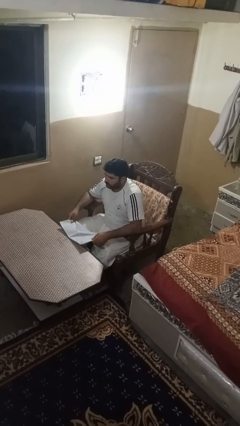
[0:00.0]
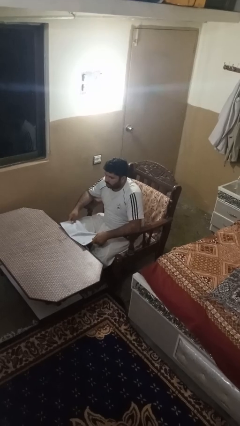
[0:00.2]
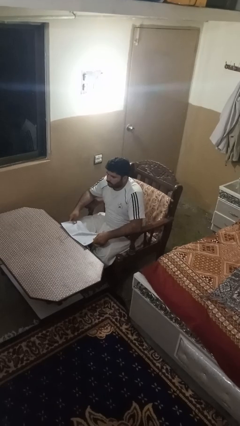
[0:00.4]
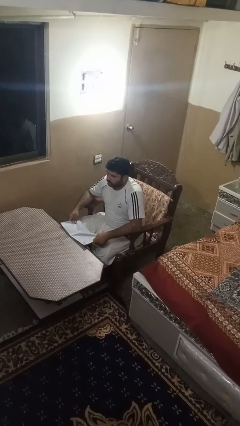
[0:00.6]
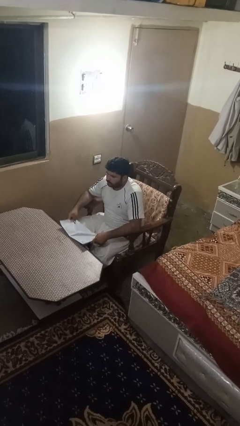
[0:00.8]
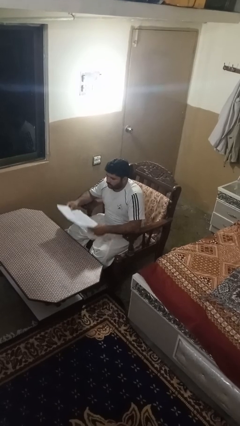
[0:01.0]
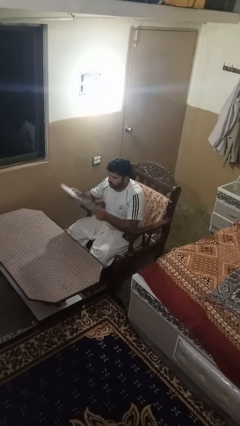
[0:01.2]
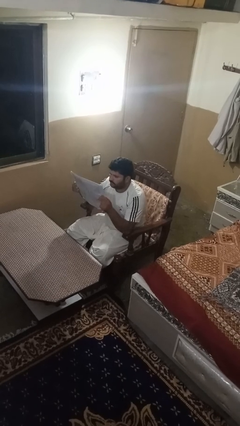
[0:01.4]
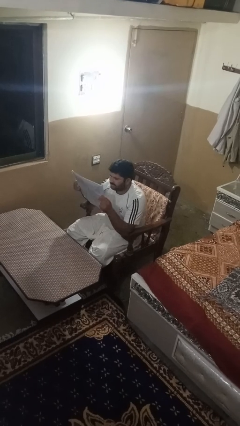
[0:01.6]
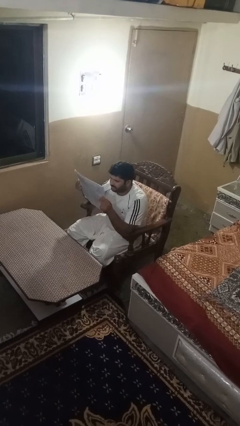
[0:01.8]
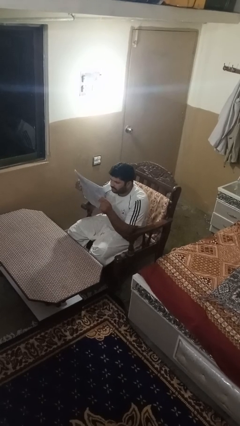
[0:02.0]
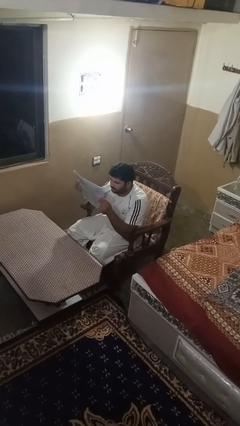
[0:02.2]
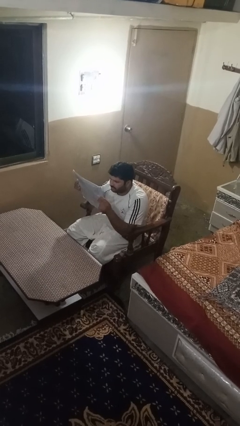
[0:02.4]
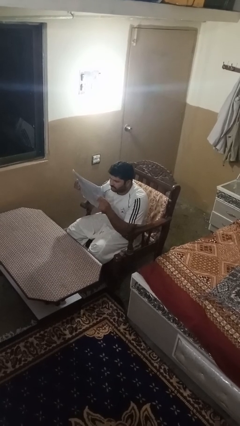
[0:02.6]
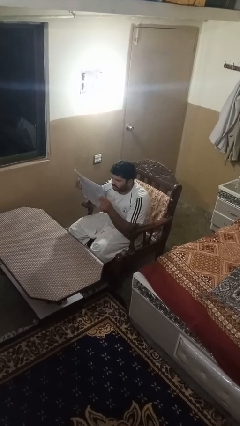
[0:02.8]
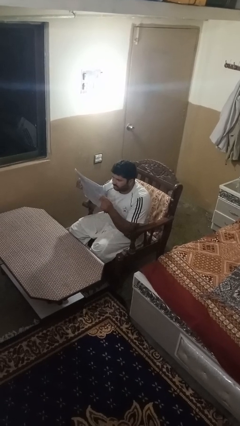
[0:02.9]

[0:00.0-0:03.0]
person reads newspaper

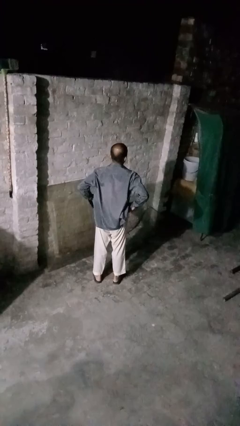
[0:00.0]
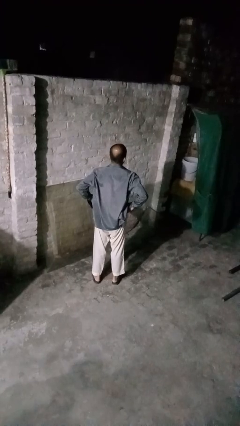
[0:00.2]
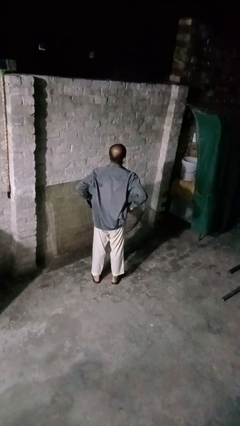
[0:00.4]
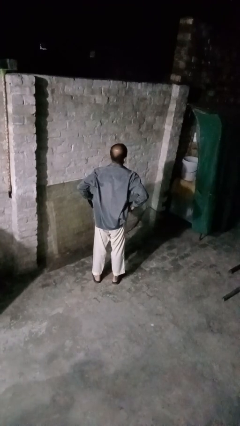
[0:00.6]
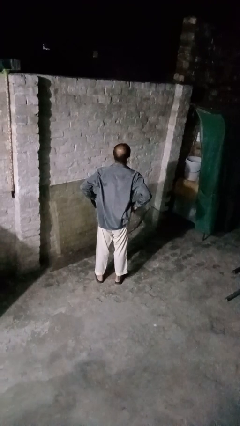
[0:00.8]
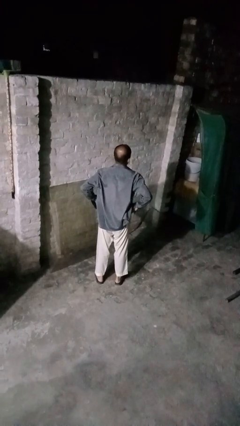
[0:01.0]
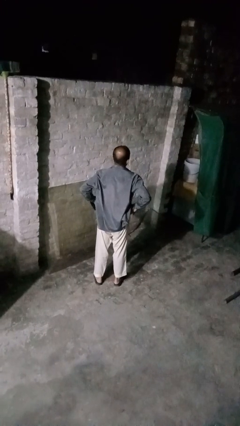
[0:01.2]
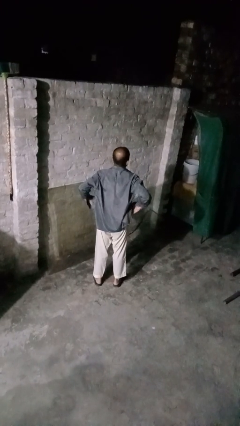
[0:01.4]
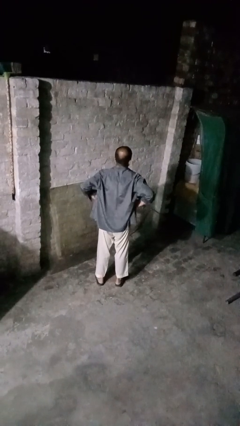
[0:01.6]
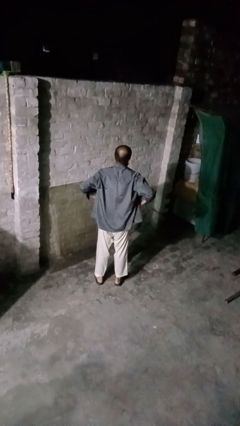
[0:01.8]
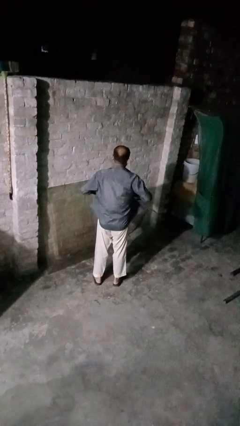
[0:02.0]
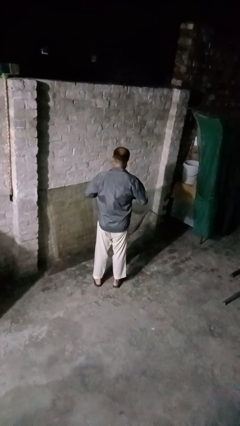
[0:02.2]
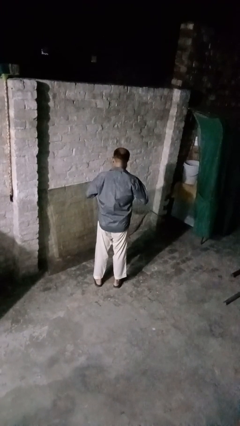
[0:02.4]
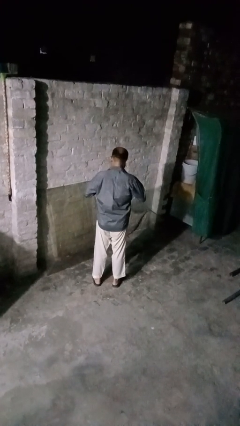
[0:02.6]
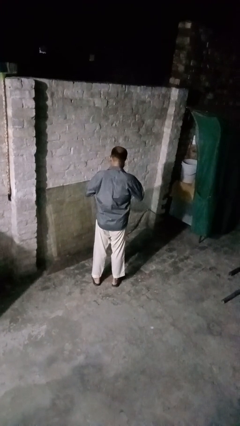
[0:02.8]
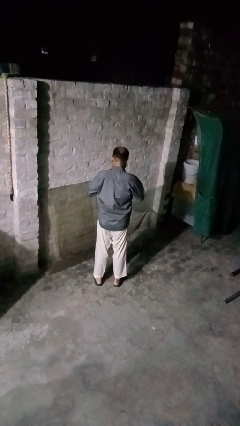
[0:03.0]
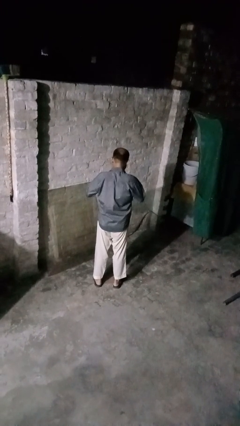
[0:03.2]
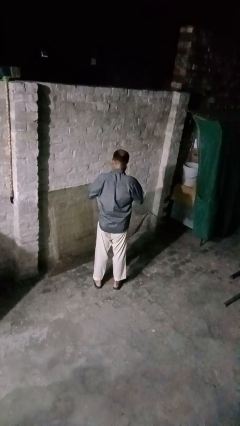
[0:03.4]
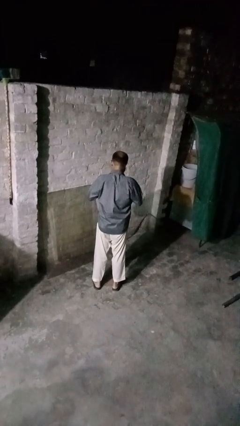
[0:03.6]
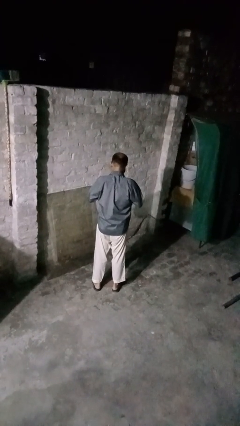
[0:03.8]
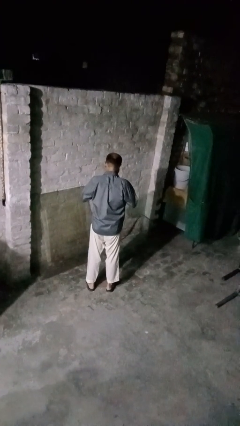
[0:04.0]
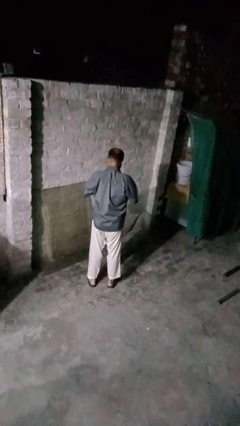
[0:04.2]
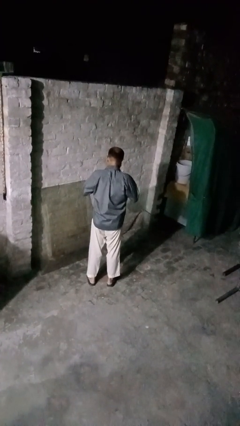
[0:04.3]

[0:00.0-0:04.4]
person buttons shirt

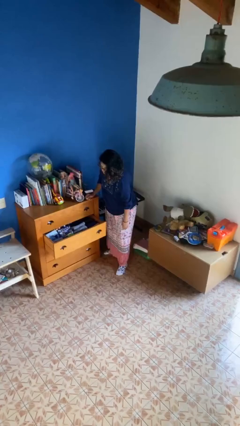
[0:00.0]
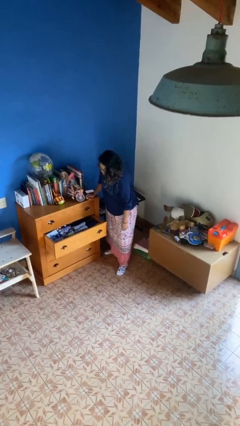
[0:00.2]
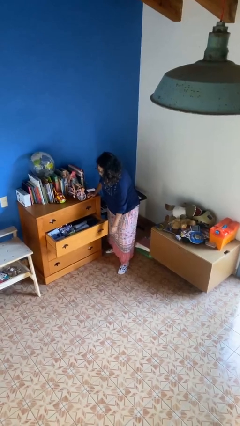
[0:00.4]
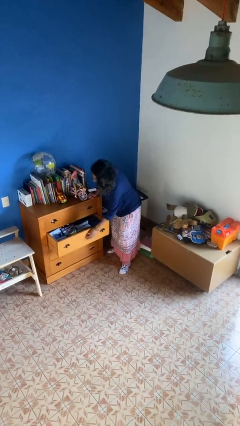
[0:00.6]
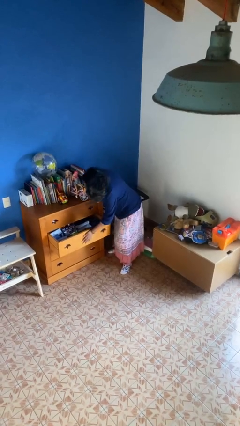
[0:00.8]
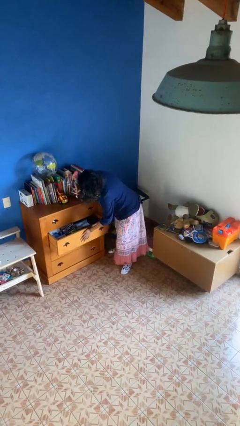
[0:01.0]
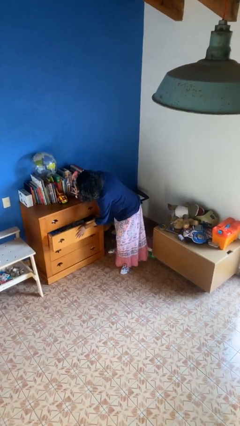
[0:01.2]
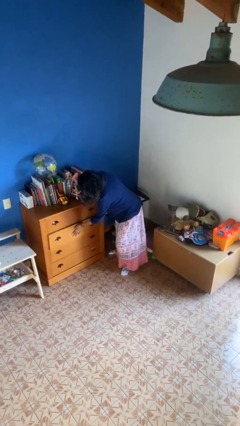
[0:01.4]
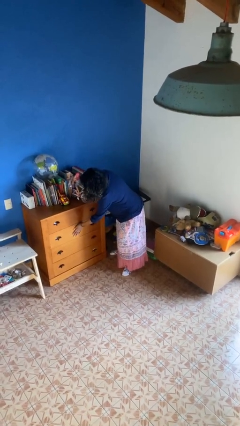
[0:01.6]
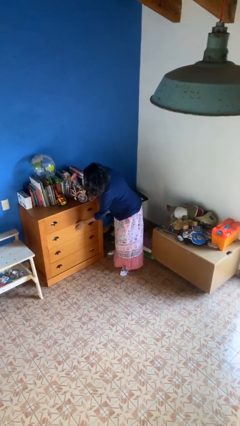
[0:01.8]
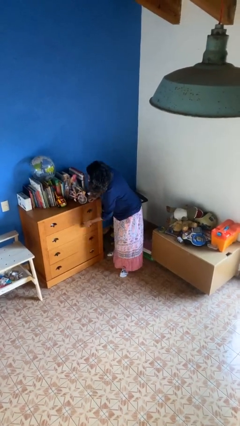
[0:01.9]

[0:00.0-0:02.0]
person closes dresser drawer

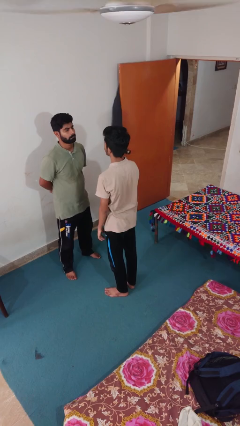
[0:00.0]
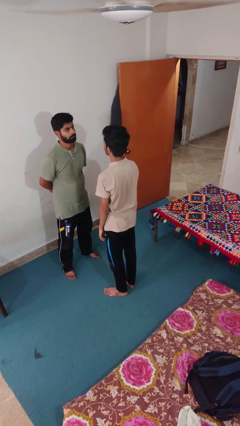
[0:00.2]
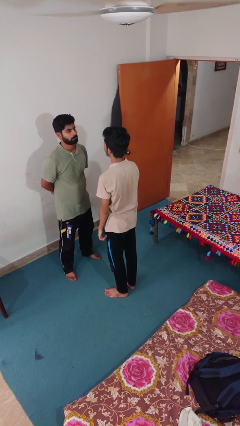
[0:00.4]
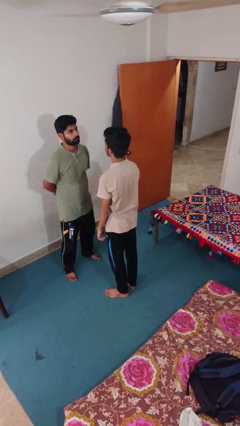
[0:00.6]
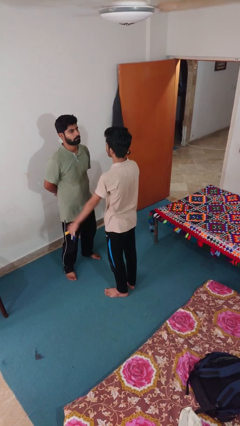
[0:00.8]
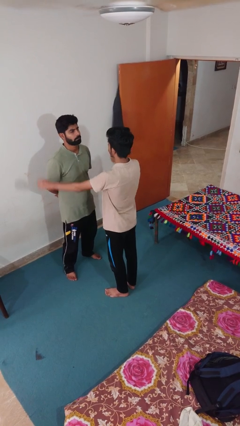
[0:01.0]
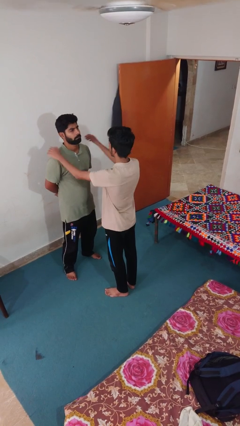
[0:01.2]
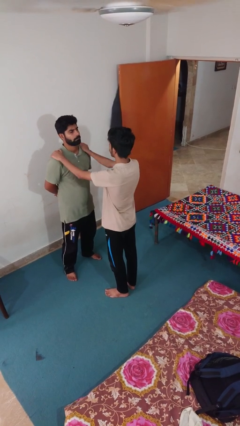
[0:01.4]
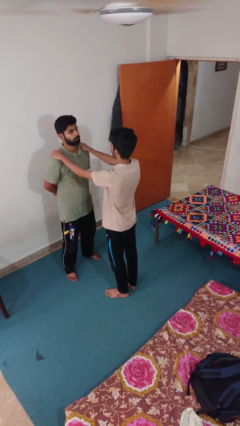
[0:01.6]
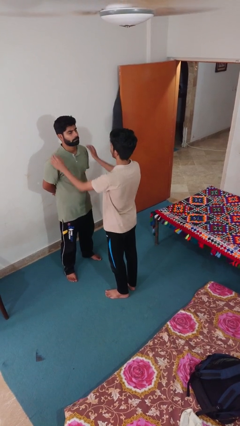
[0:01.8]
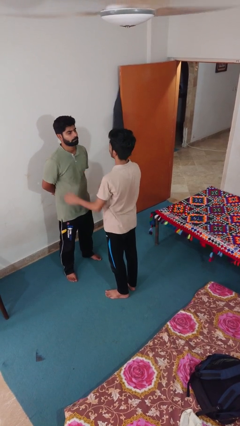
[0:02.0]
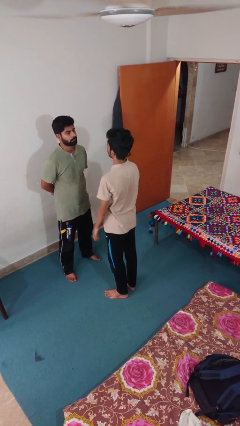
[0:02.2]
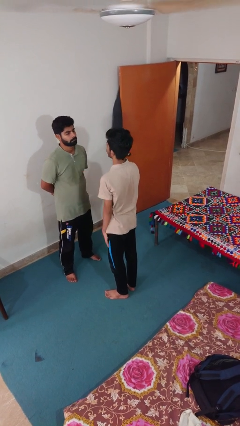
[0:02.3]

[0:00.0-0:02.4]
person pounds shoulders of person

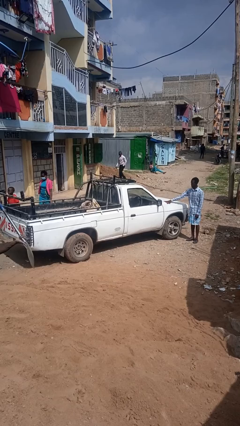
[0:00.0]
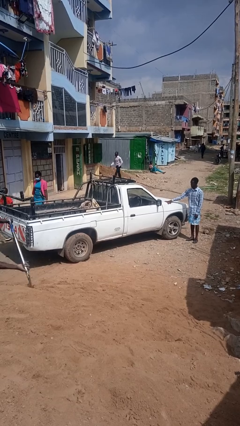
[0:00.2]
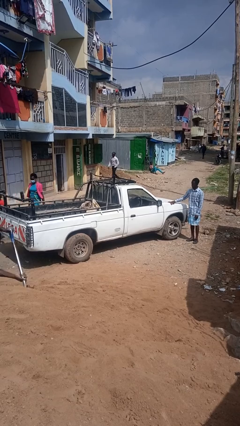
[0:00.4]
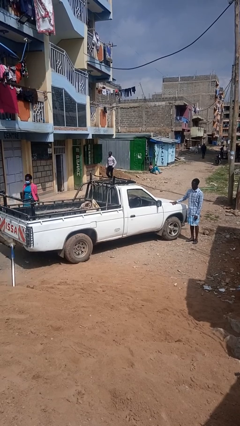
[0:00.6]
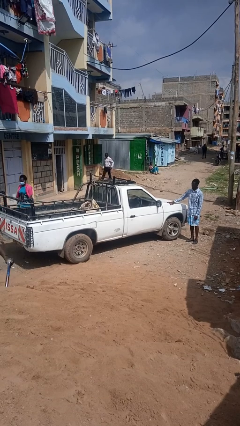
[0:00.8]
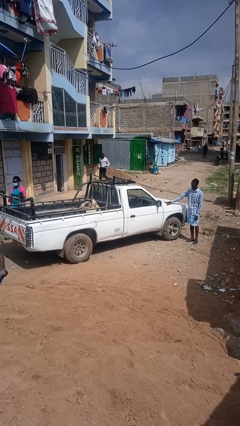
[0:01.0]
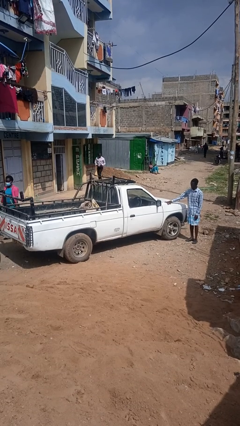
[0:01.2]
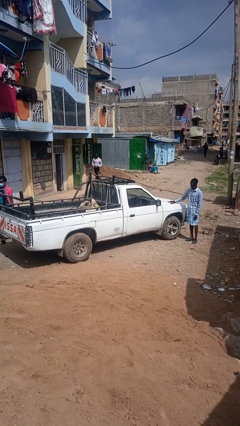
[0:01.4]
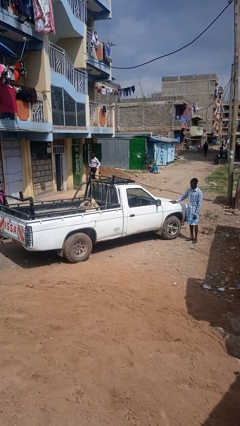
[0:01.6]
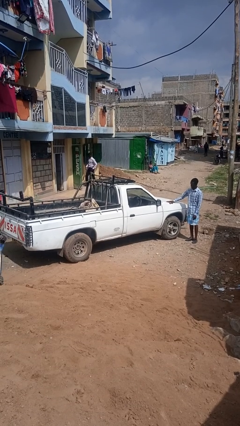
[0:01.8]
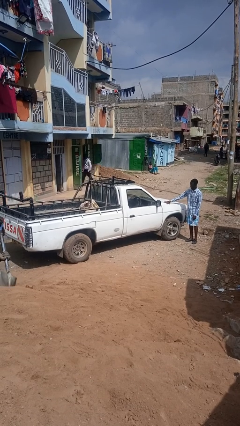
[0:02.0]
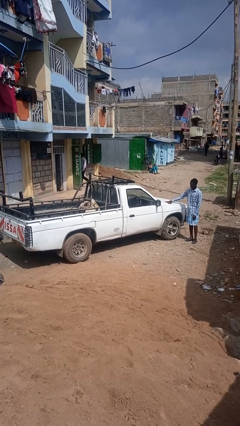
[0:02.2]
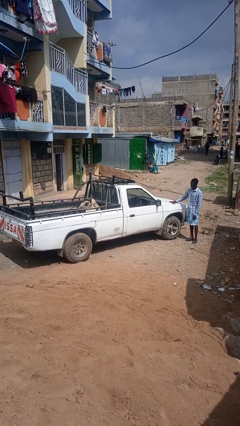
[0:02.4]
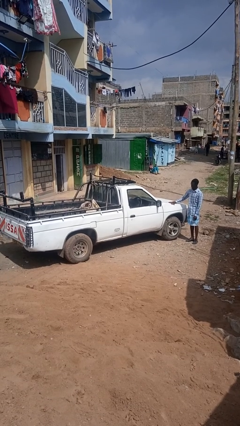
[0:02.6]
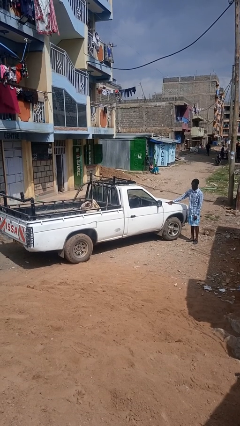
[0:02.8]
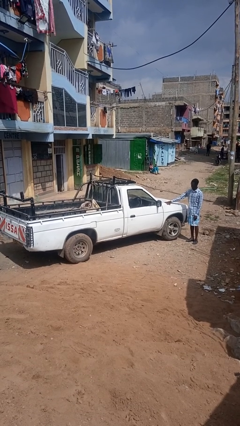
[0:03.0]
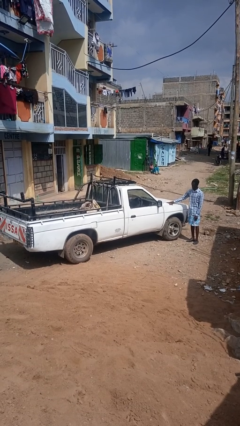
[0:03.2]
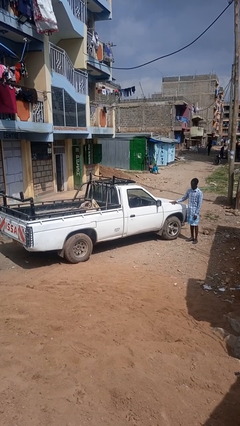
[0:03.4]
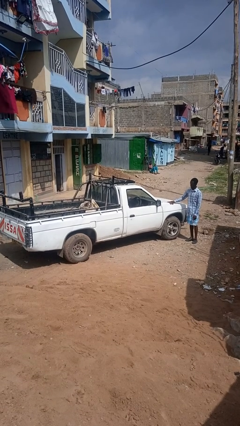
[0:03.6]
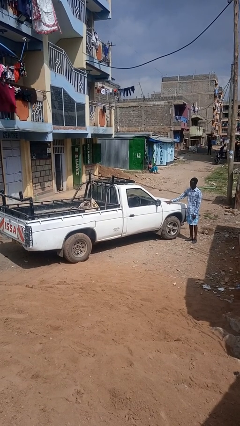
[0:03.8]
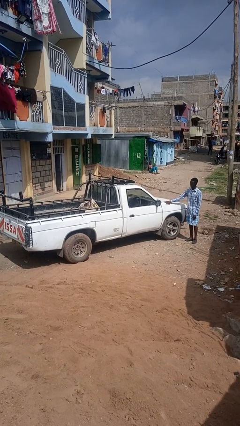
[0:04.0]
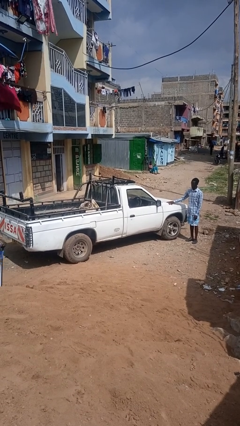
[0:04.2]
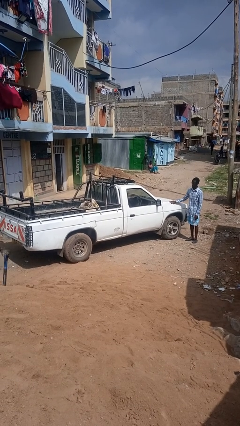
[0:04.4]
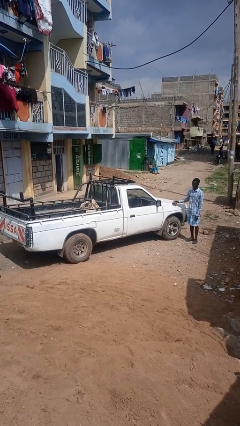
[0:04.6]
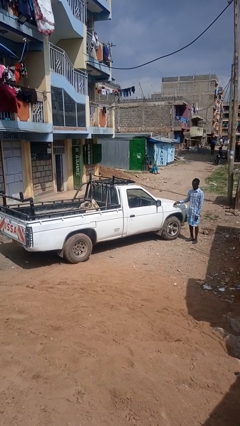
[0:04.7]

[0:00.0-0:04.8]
person polishes car with rag

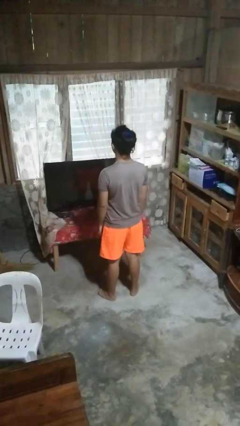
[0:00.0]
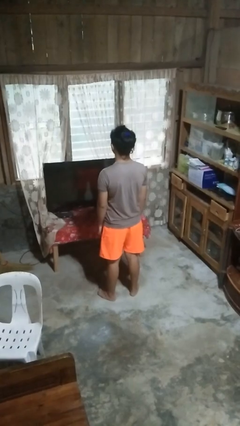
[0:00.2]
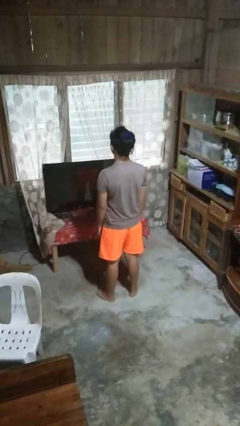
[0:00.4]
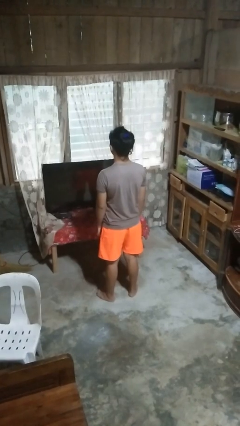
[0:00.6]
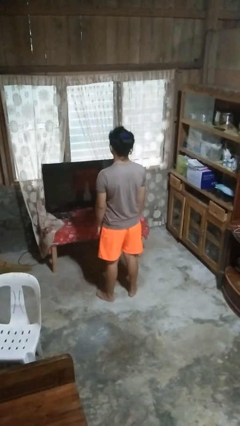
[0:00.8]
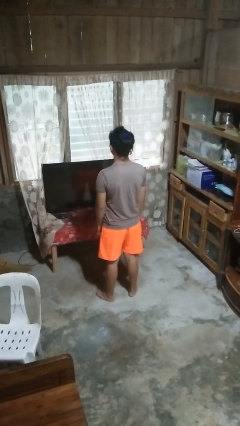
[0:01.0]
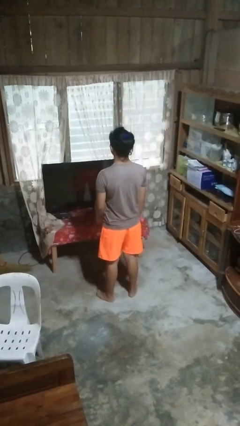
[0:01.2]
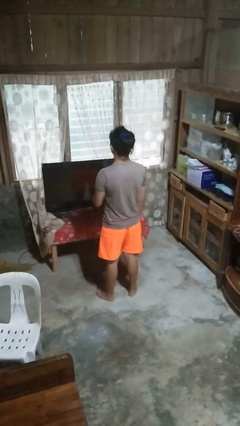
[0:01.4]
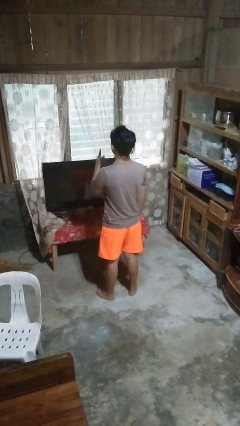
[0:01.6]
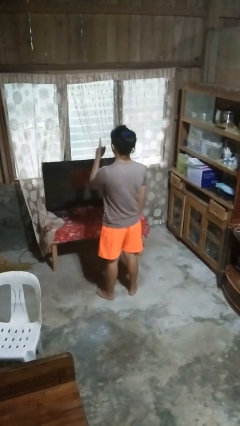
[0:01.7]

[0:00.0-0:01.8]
person gestures number one
